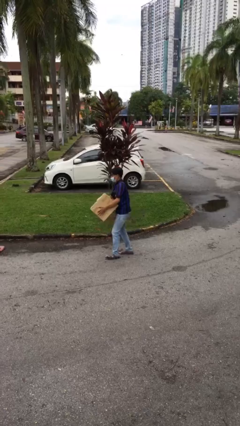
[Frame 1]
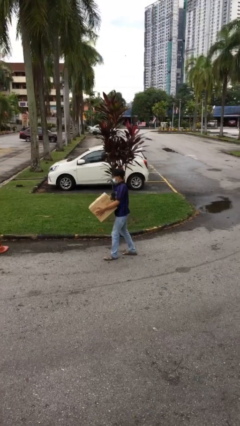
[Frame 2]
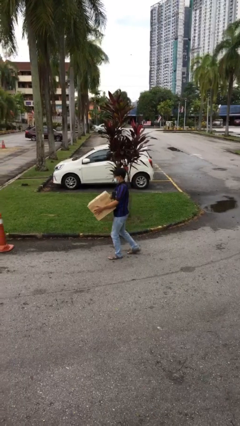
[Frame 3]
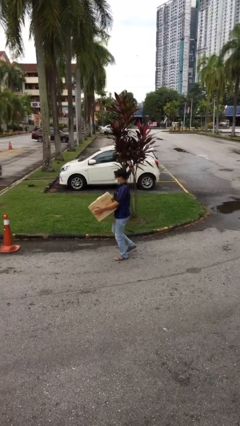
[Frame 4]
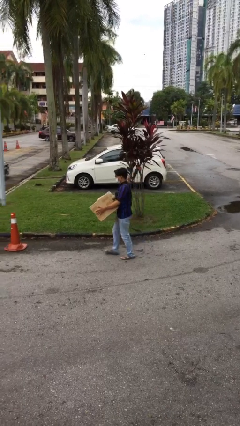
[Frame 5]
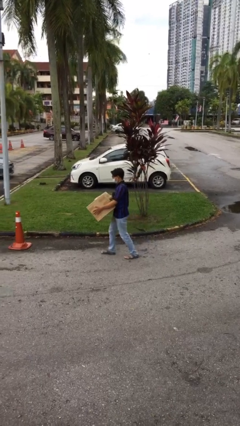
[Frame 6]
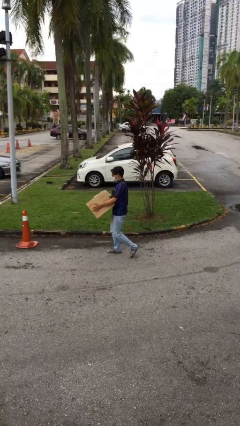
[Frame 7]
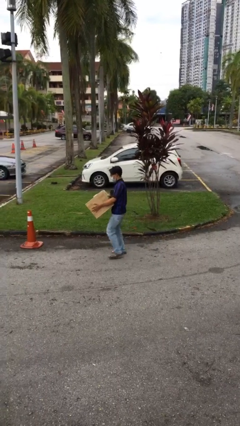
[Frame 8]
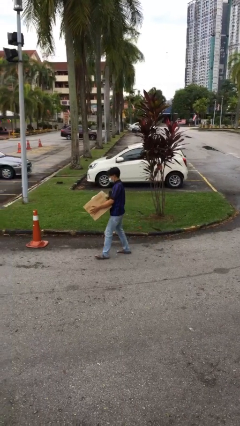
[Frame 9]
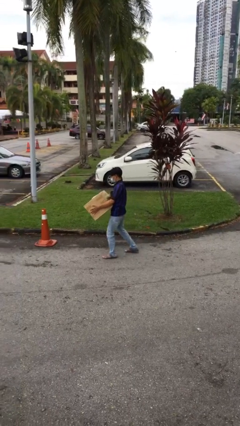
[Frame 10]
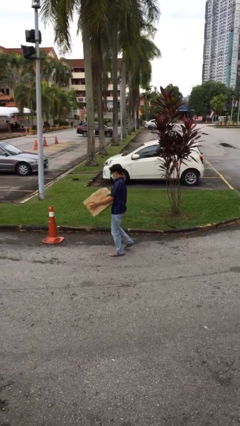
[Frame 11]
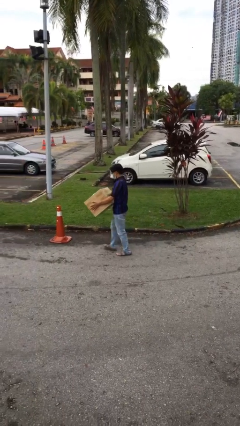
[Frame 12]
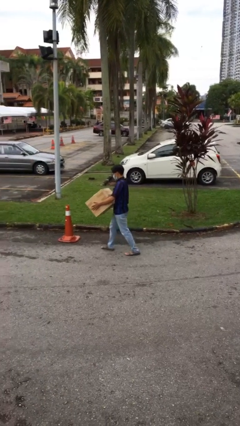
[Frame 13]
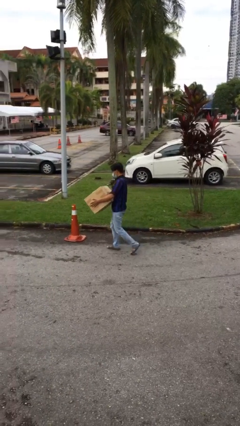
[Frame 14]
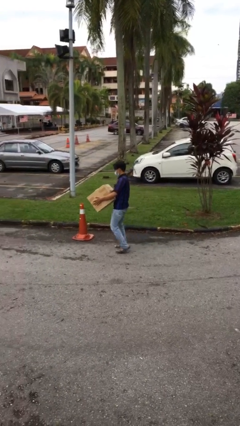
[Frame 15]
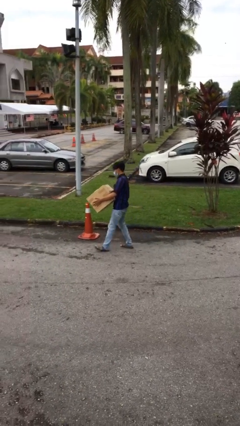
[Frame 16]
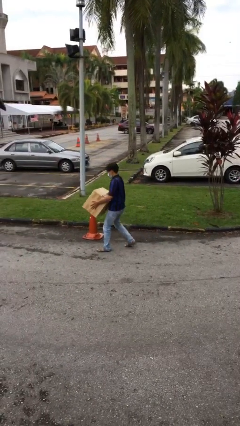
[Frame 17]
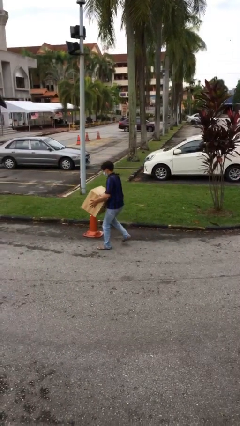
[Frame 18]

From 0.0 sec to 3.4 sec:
person carries heavy object

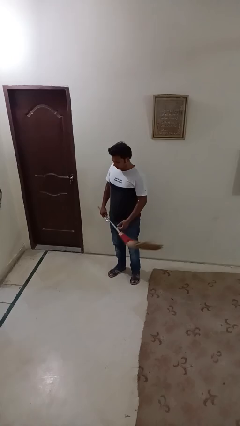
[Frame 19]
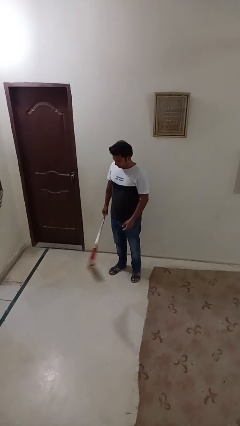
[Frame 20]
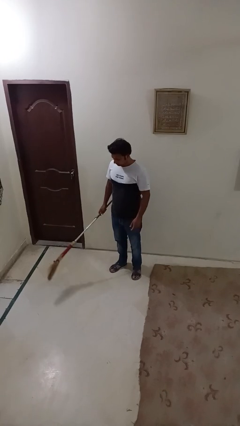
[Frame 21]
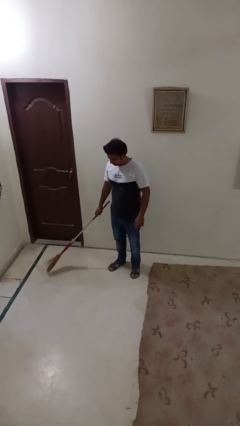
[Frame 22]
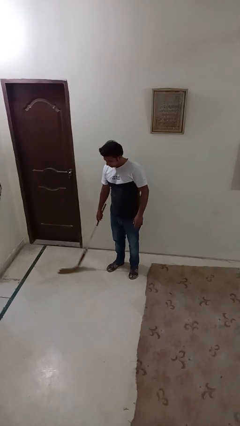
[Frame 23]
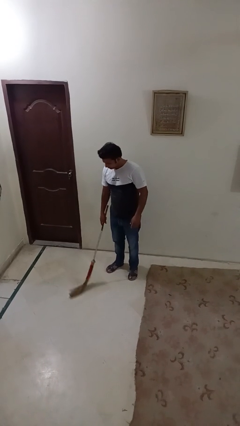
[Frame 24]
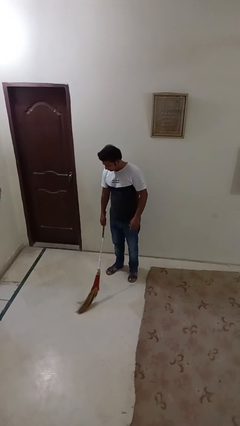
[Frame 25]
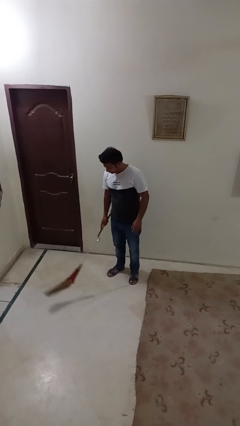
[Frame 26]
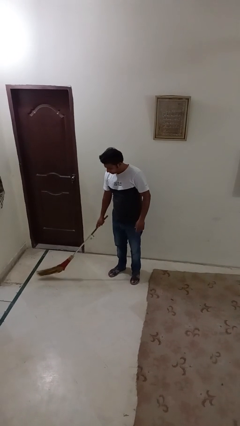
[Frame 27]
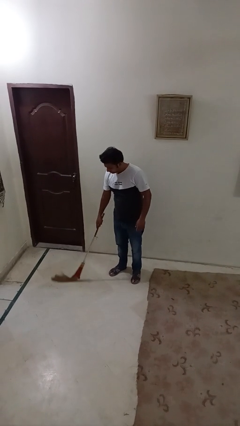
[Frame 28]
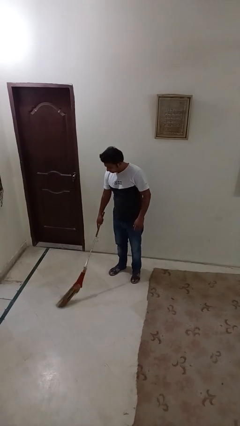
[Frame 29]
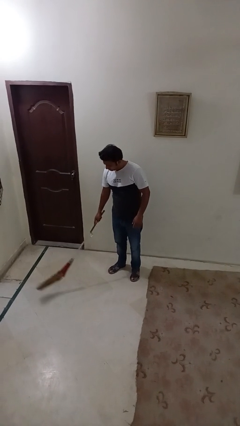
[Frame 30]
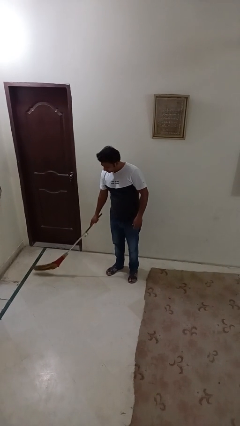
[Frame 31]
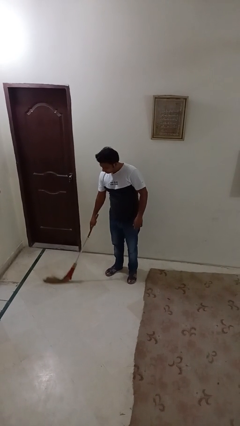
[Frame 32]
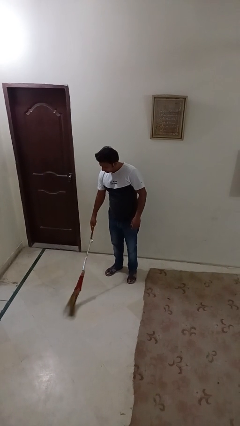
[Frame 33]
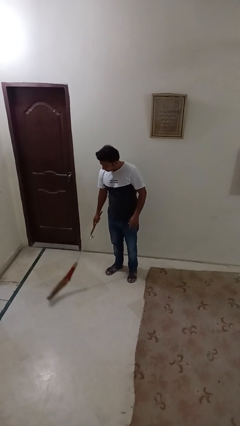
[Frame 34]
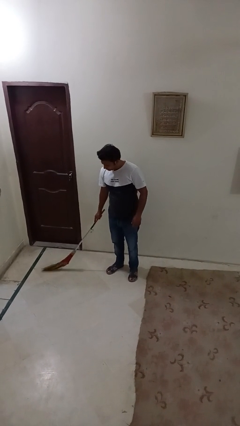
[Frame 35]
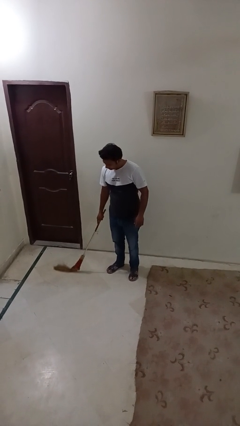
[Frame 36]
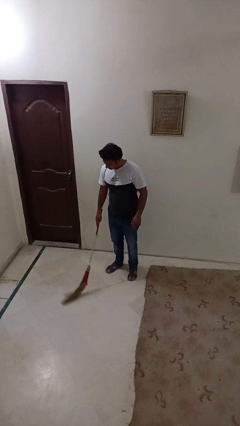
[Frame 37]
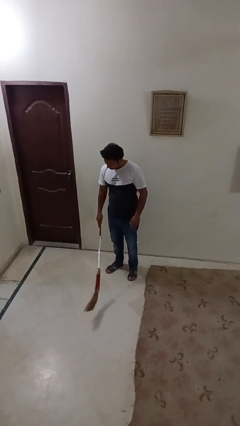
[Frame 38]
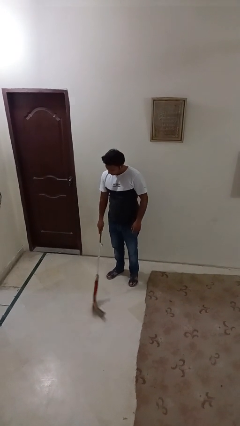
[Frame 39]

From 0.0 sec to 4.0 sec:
person sweeps floor

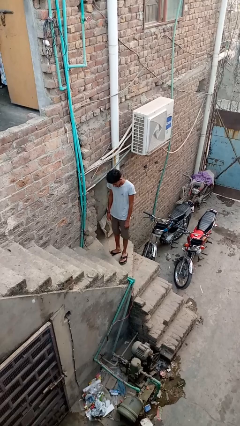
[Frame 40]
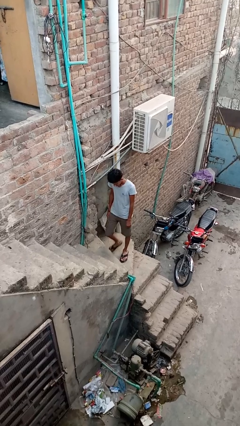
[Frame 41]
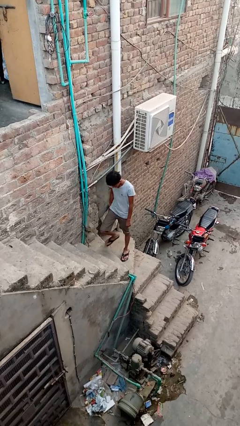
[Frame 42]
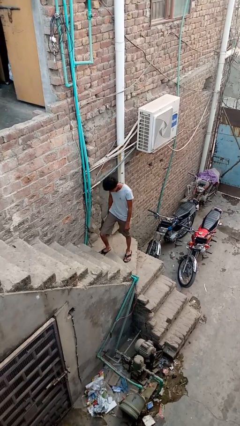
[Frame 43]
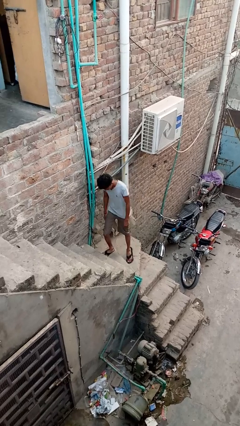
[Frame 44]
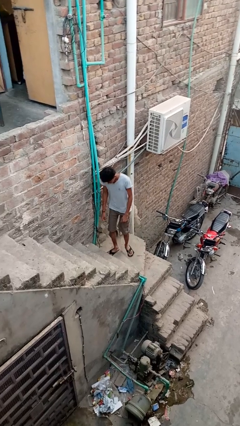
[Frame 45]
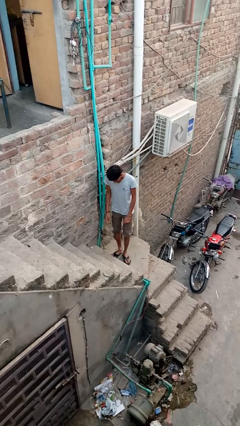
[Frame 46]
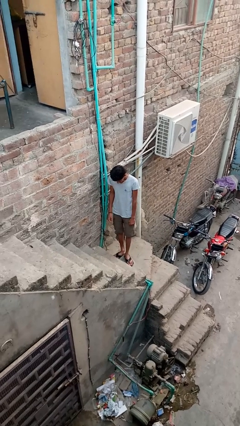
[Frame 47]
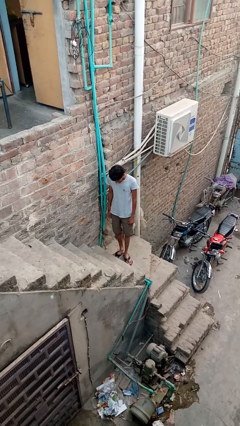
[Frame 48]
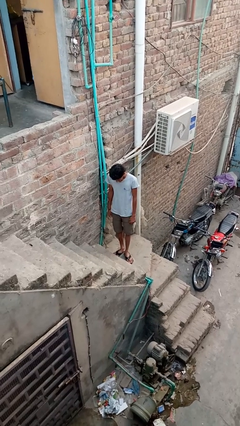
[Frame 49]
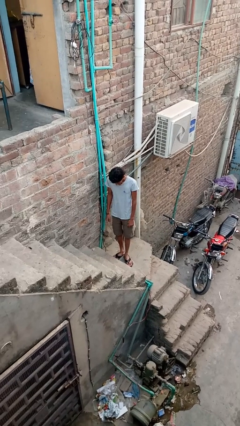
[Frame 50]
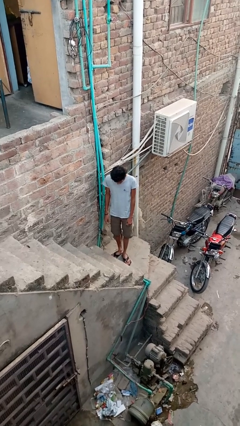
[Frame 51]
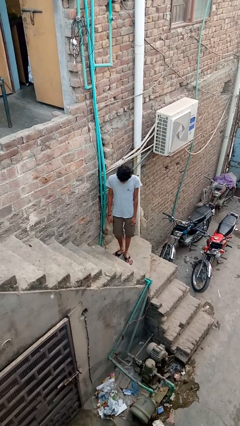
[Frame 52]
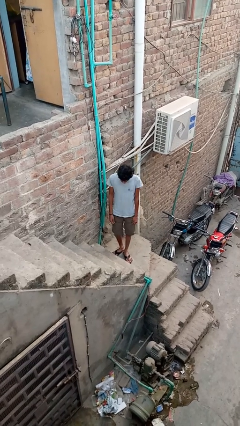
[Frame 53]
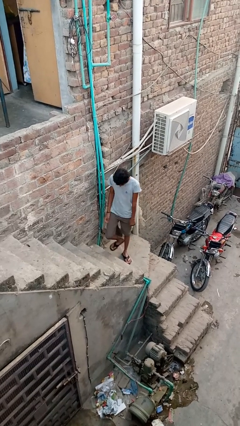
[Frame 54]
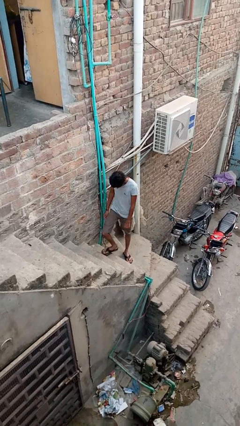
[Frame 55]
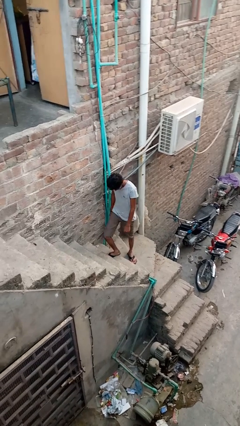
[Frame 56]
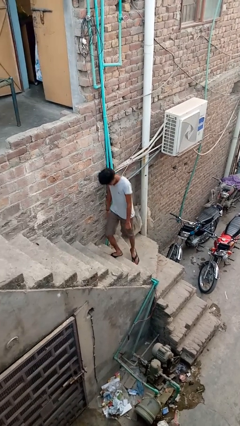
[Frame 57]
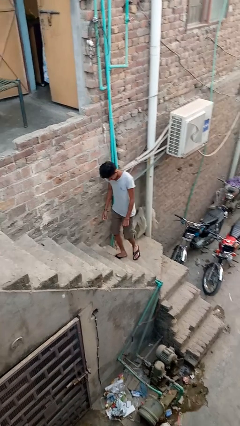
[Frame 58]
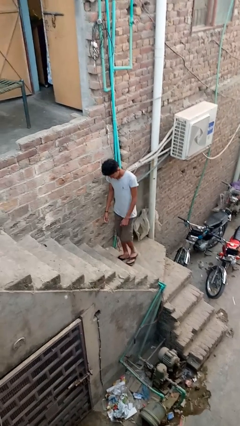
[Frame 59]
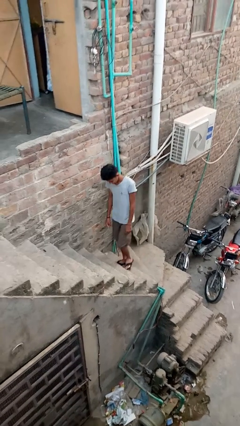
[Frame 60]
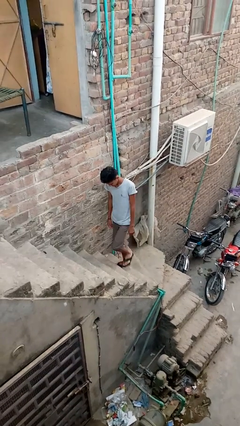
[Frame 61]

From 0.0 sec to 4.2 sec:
person climbs up stairs

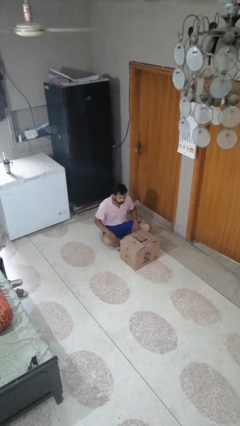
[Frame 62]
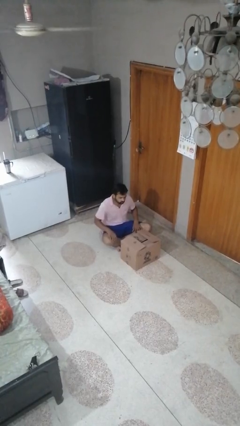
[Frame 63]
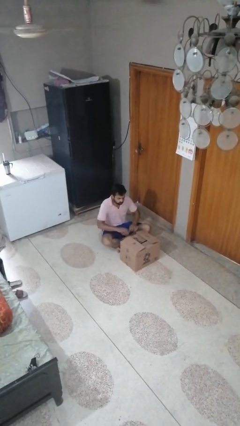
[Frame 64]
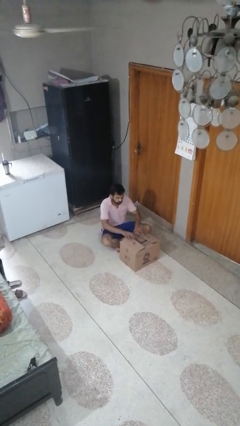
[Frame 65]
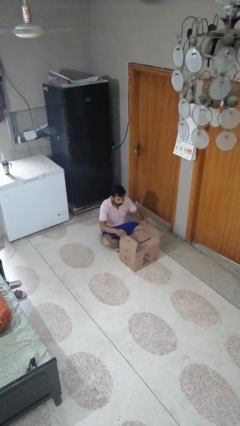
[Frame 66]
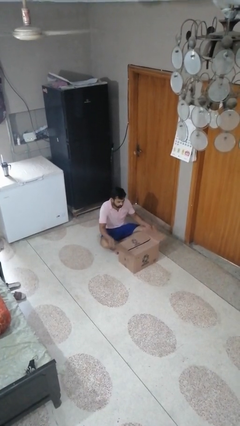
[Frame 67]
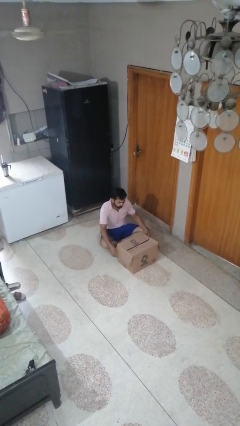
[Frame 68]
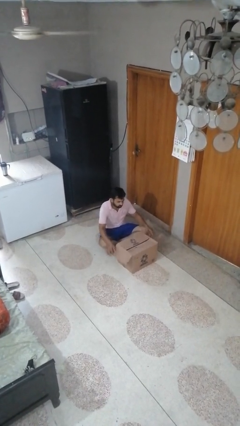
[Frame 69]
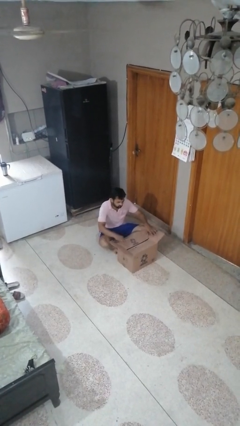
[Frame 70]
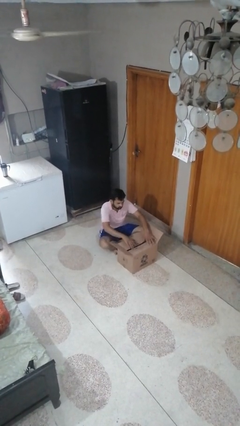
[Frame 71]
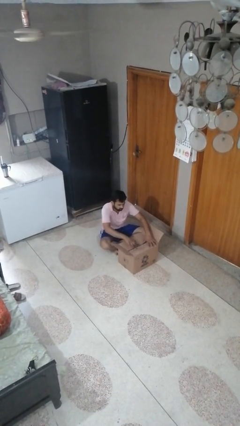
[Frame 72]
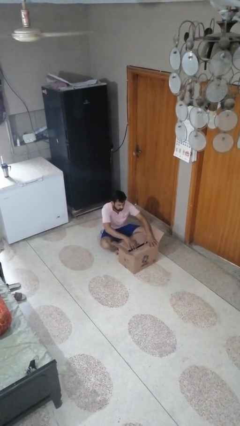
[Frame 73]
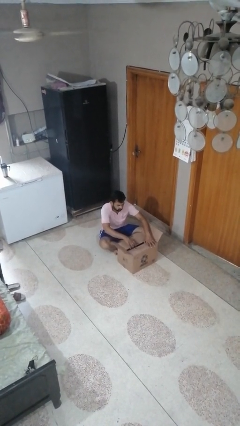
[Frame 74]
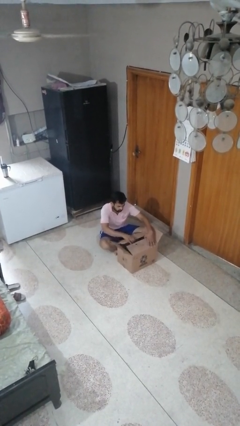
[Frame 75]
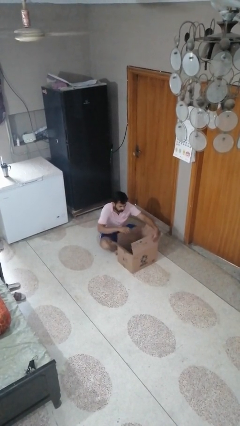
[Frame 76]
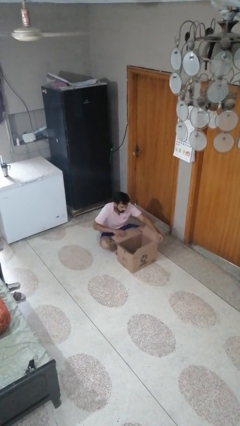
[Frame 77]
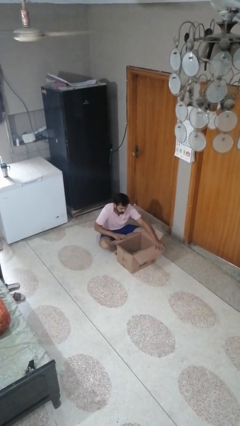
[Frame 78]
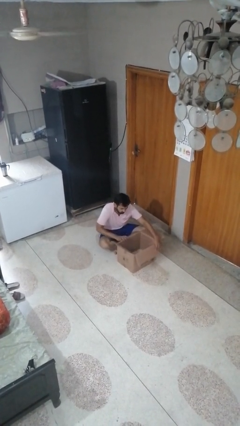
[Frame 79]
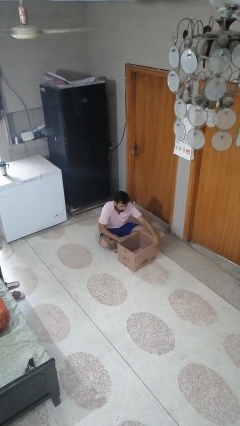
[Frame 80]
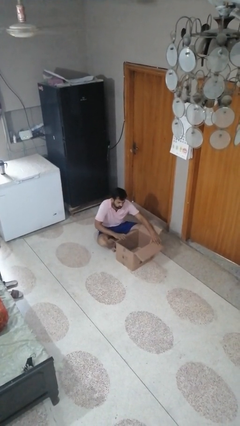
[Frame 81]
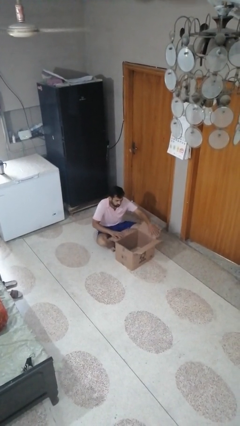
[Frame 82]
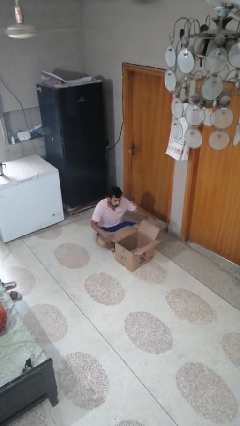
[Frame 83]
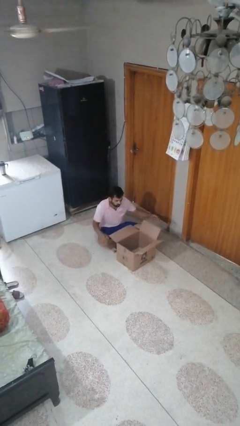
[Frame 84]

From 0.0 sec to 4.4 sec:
person opens box

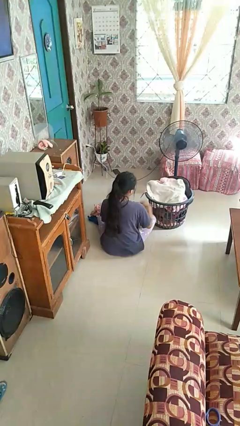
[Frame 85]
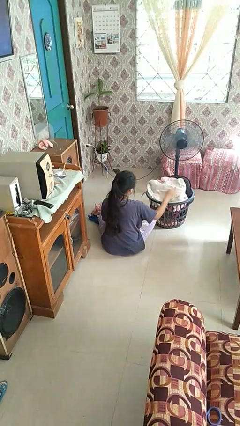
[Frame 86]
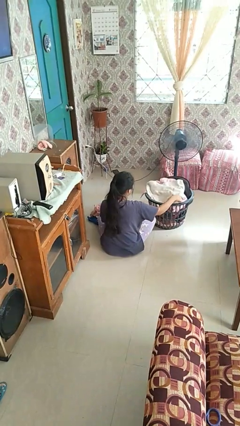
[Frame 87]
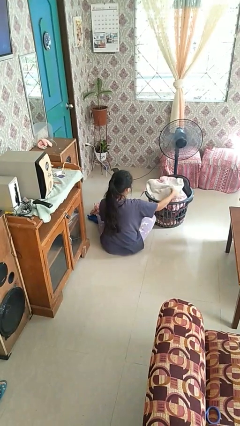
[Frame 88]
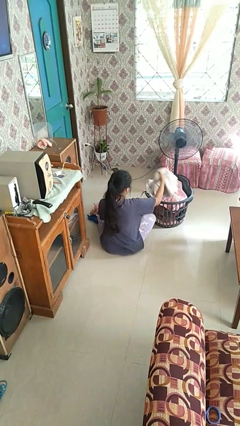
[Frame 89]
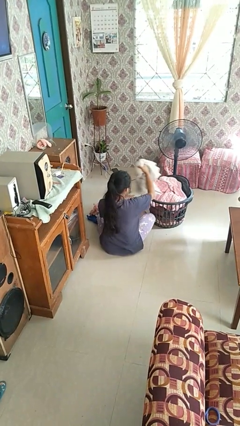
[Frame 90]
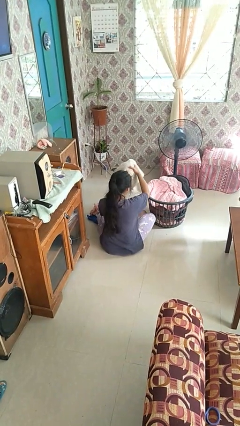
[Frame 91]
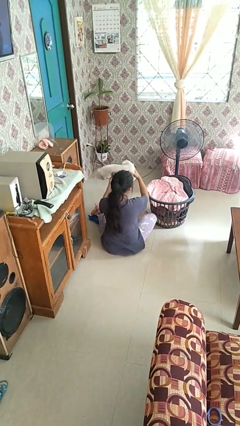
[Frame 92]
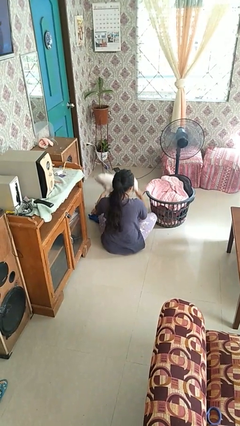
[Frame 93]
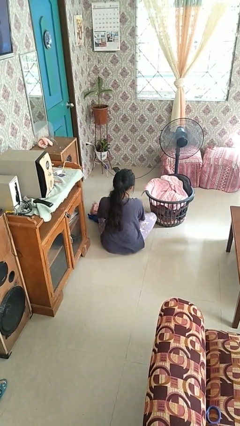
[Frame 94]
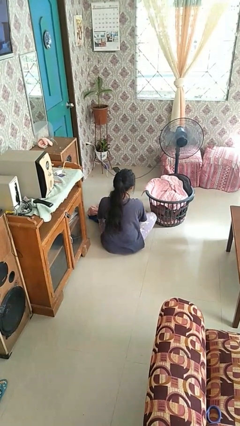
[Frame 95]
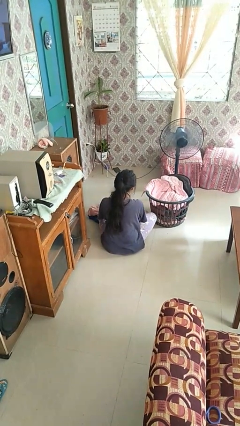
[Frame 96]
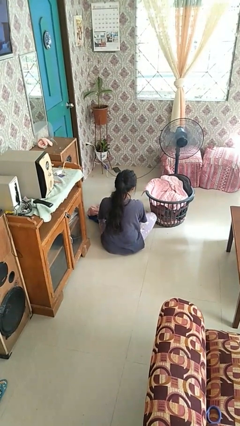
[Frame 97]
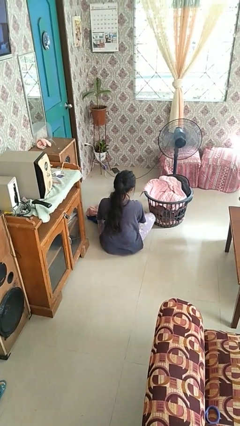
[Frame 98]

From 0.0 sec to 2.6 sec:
person takes object from basket
